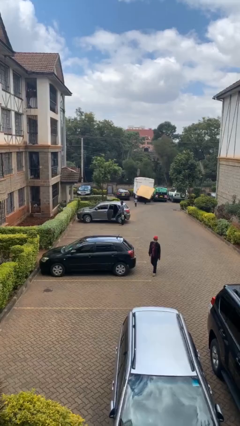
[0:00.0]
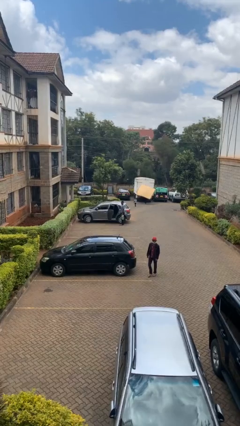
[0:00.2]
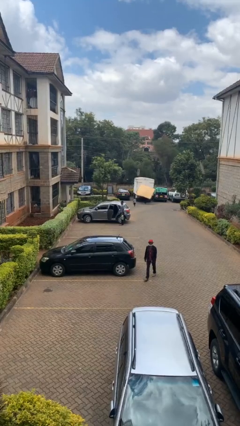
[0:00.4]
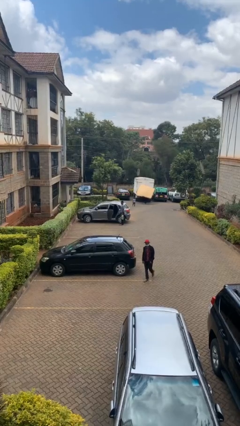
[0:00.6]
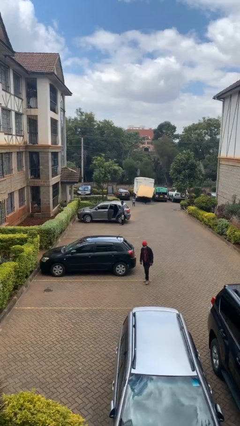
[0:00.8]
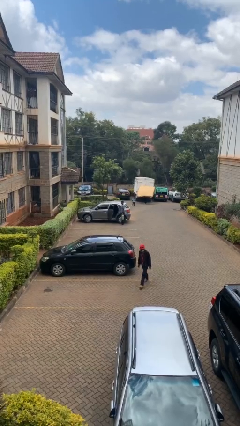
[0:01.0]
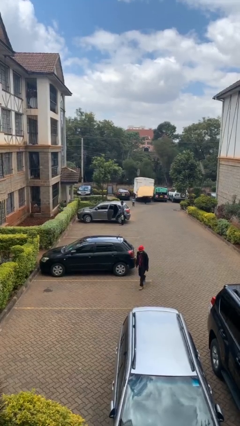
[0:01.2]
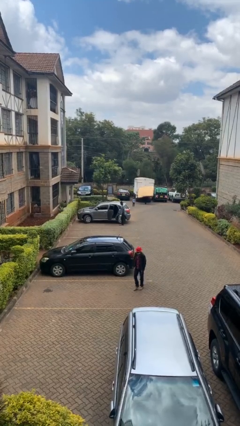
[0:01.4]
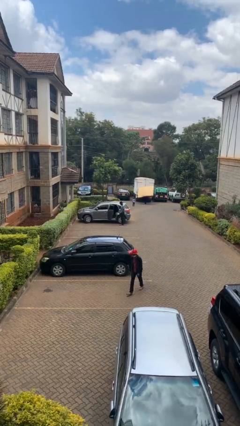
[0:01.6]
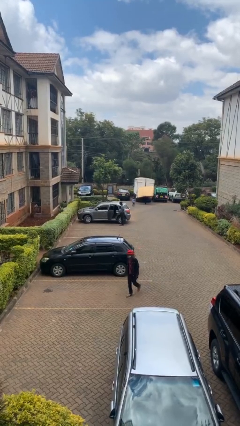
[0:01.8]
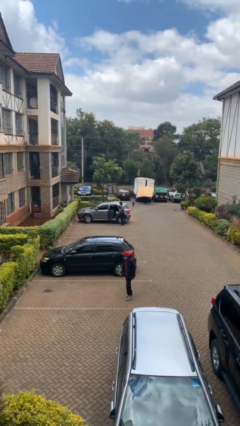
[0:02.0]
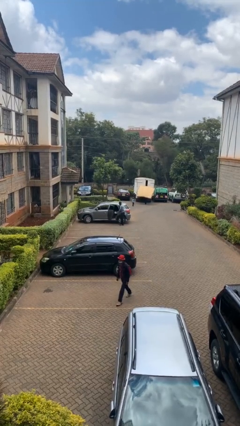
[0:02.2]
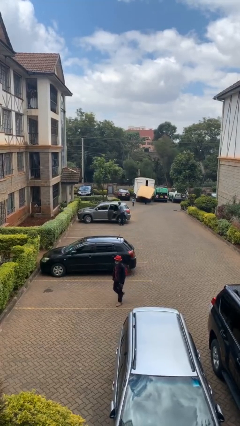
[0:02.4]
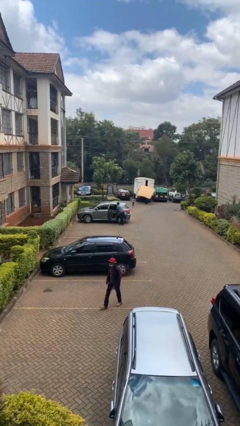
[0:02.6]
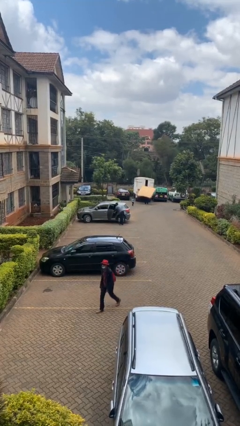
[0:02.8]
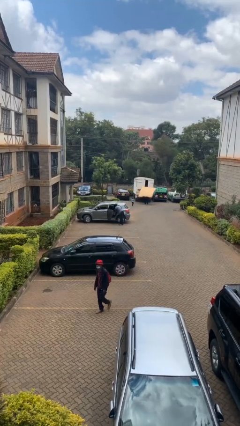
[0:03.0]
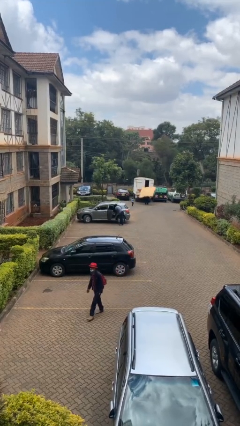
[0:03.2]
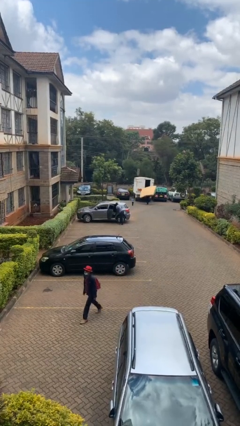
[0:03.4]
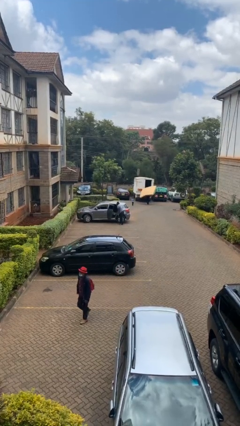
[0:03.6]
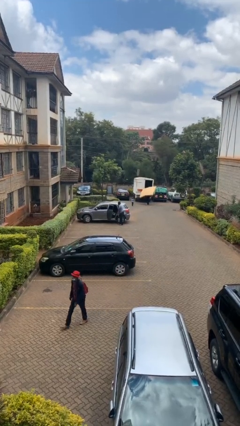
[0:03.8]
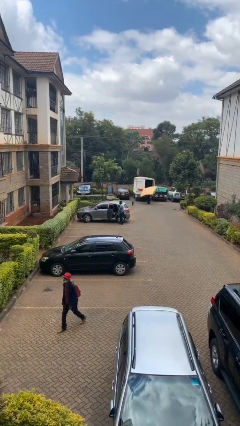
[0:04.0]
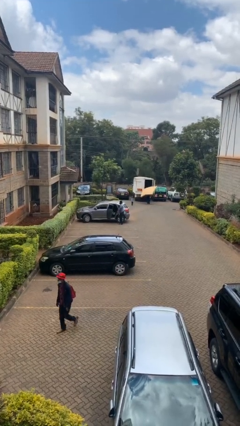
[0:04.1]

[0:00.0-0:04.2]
person loads car

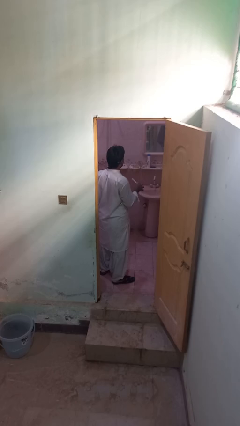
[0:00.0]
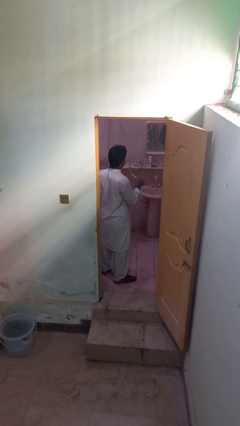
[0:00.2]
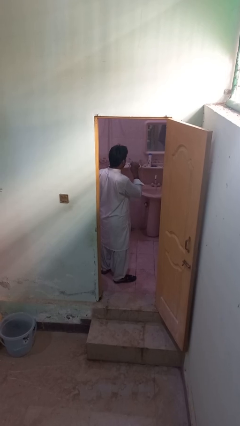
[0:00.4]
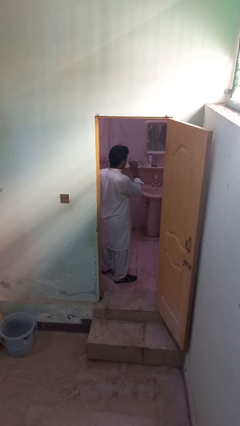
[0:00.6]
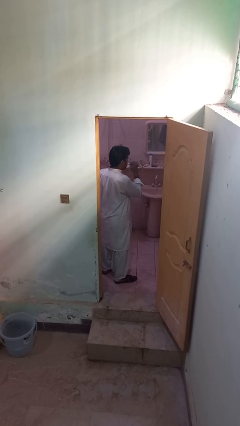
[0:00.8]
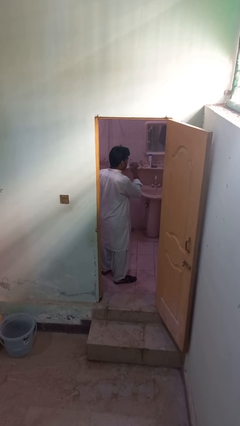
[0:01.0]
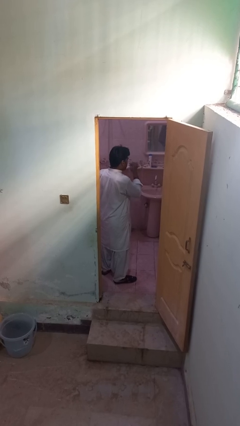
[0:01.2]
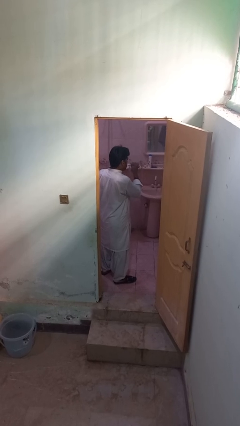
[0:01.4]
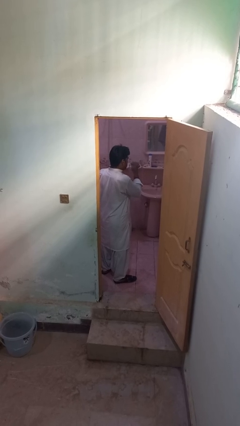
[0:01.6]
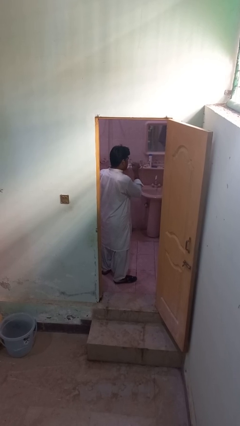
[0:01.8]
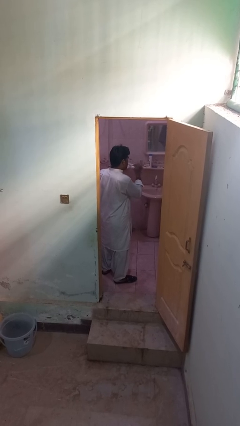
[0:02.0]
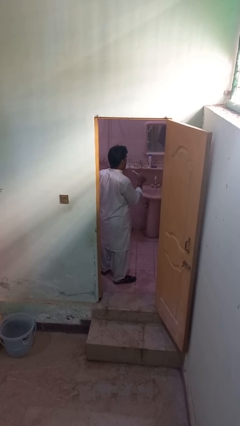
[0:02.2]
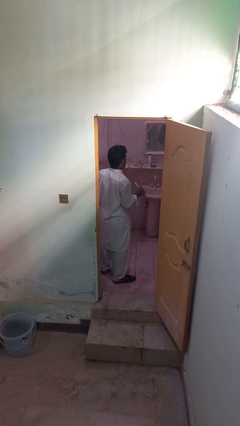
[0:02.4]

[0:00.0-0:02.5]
person brushes teeth

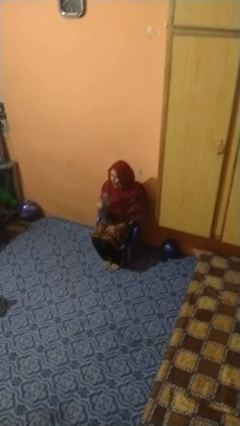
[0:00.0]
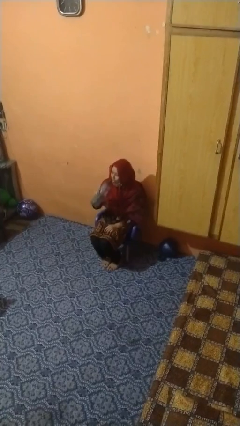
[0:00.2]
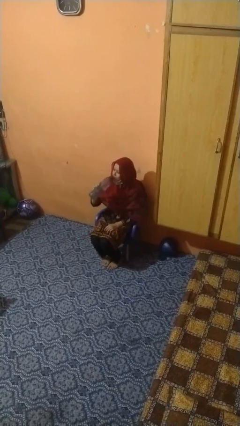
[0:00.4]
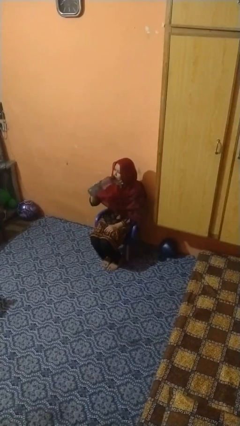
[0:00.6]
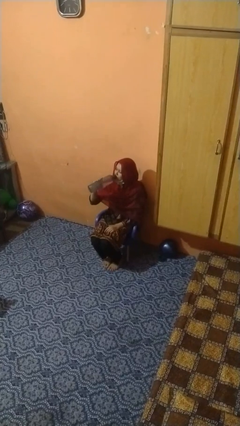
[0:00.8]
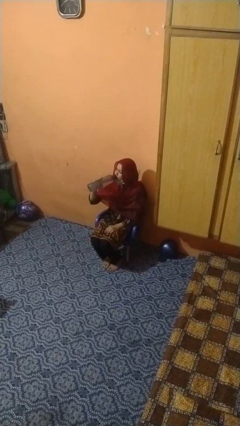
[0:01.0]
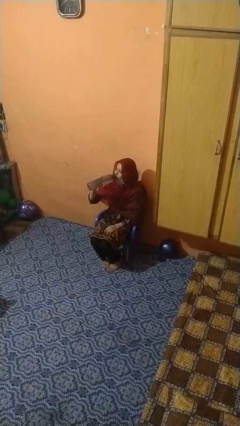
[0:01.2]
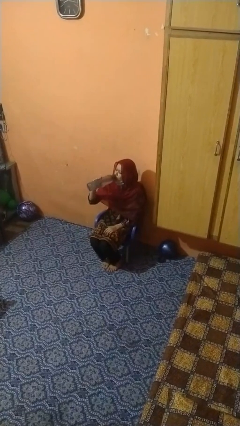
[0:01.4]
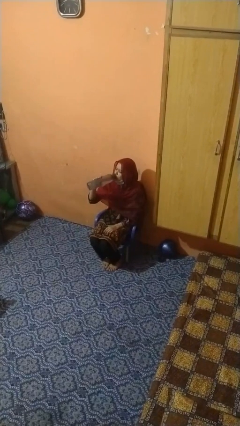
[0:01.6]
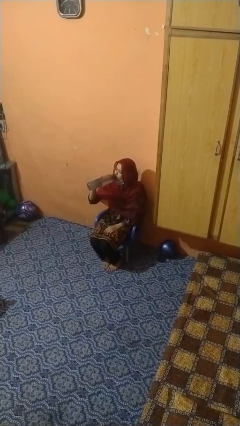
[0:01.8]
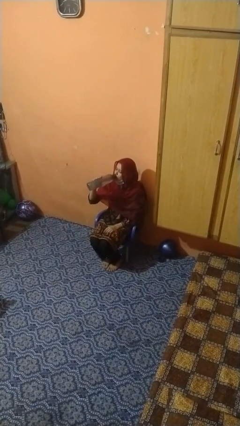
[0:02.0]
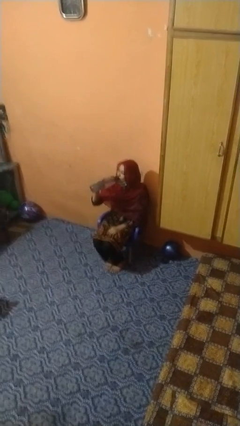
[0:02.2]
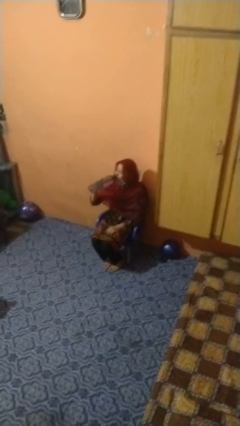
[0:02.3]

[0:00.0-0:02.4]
person drinks from bottle

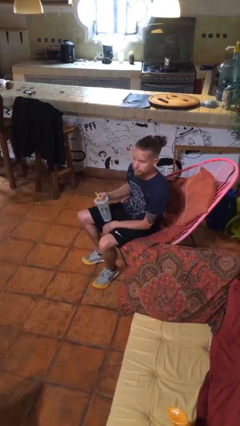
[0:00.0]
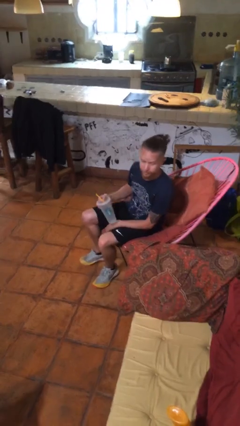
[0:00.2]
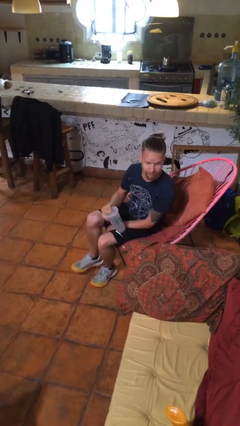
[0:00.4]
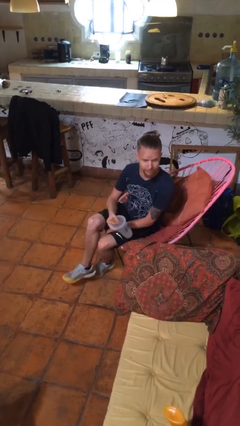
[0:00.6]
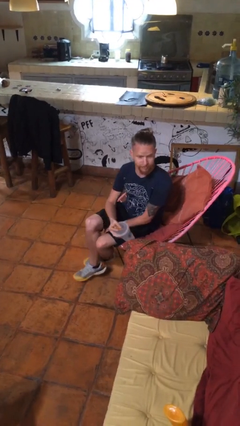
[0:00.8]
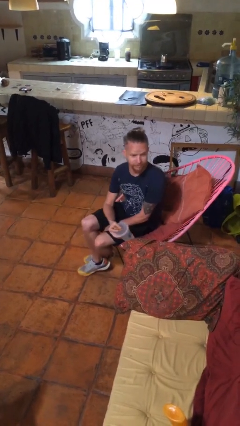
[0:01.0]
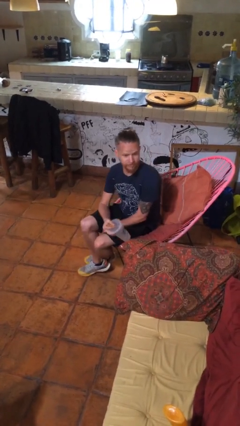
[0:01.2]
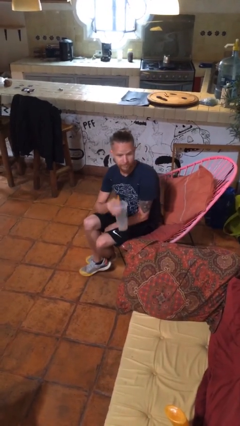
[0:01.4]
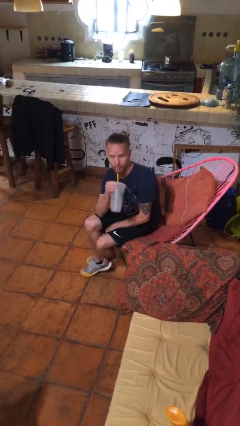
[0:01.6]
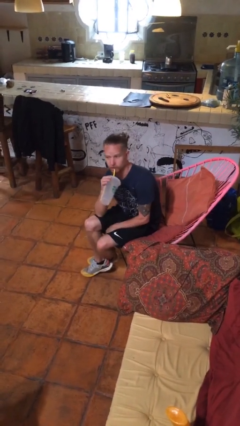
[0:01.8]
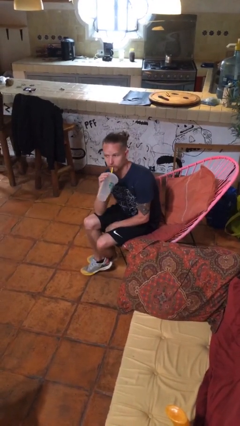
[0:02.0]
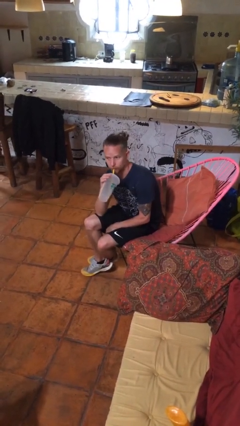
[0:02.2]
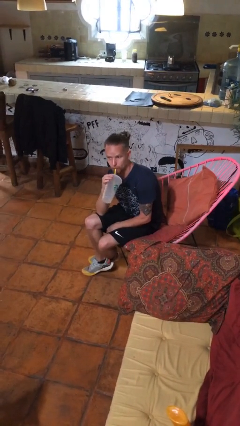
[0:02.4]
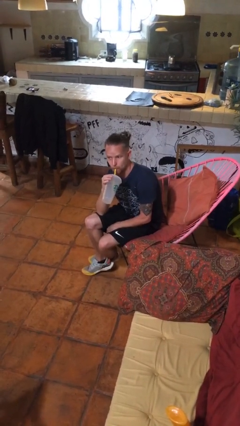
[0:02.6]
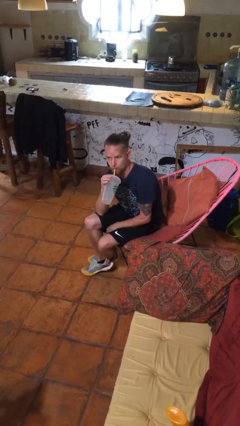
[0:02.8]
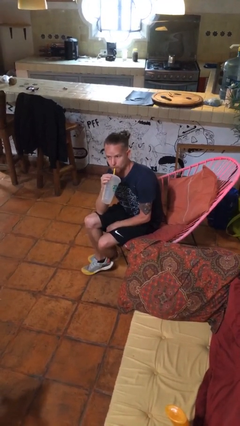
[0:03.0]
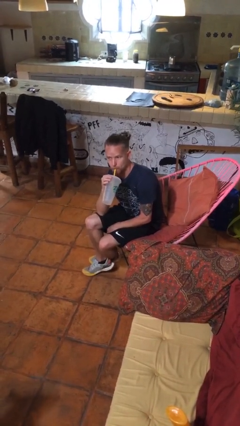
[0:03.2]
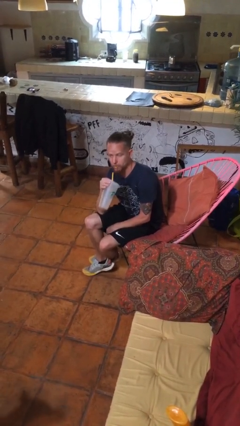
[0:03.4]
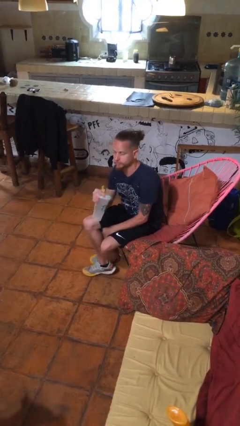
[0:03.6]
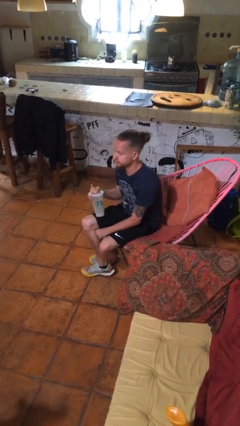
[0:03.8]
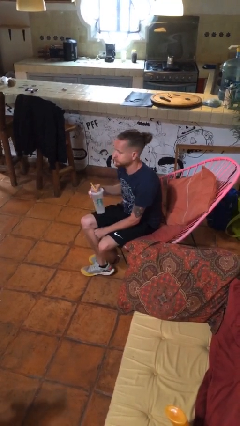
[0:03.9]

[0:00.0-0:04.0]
person drinks from straw

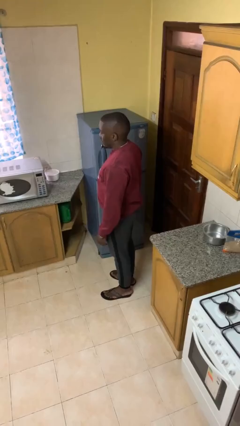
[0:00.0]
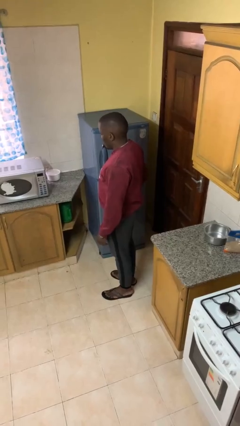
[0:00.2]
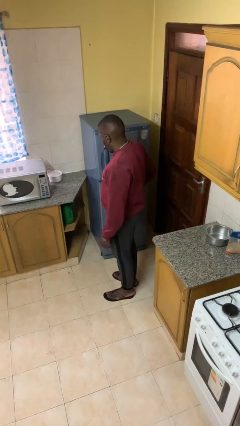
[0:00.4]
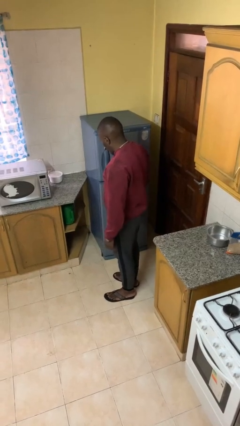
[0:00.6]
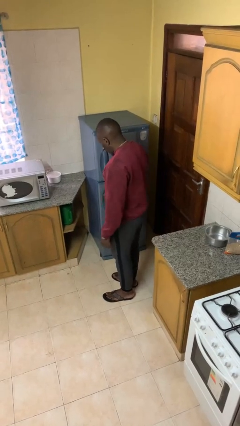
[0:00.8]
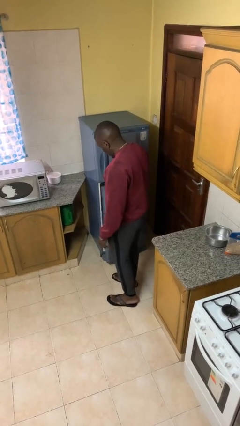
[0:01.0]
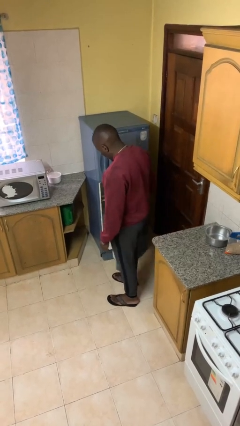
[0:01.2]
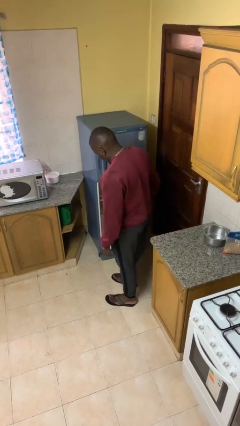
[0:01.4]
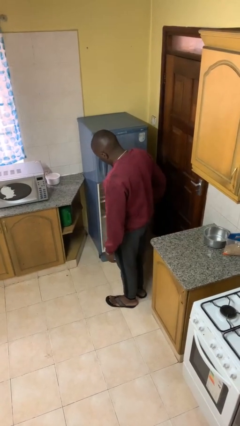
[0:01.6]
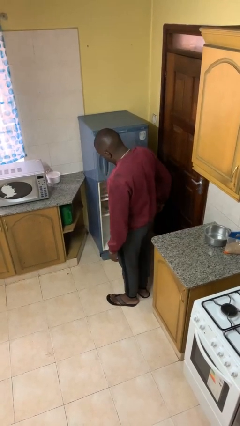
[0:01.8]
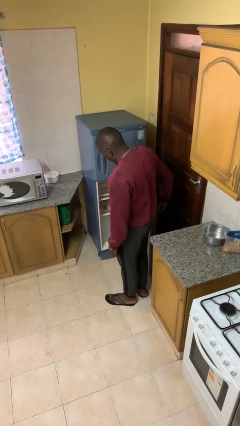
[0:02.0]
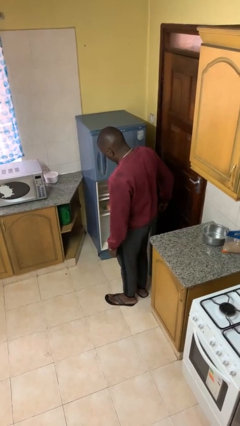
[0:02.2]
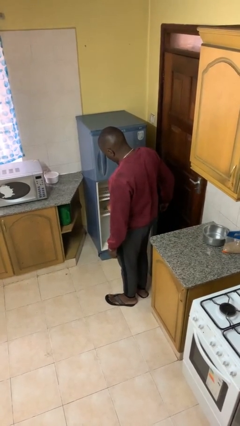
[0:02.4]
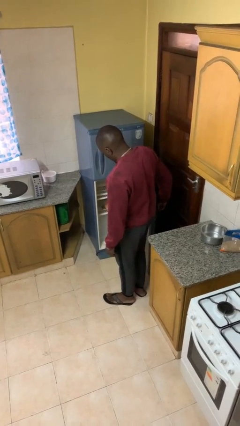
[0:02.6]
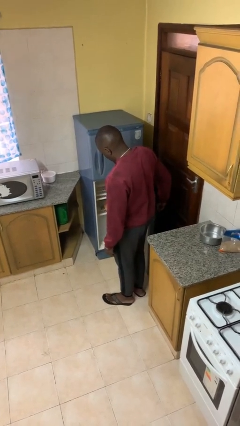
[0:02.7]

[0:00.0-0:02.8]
person opens refrigerator

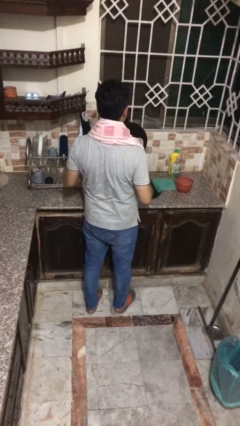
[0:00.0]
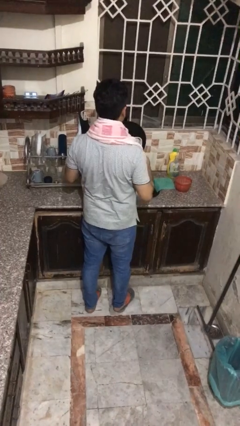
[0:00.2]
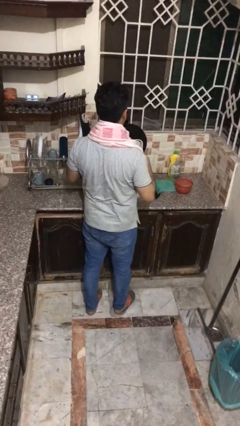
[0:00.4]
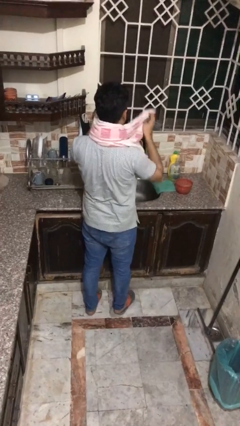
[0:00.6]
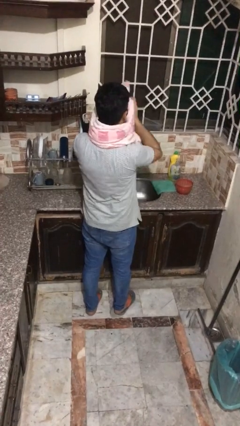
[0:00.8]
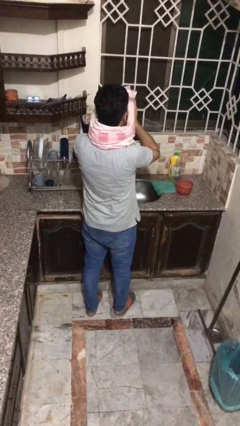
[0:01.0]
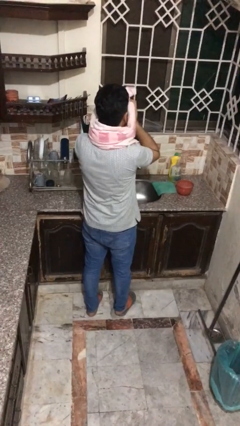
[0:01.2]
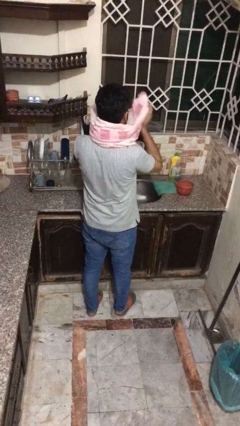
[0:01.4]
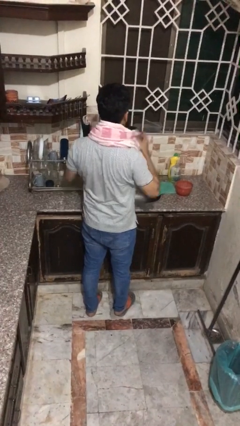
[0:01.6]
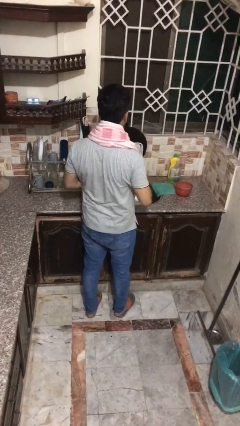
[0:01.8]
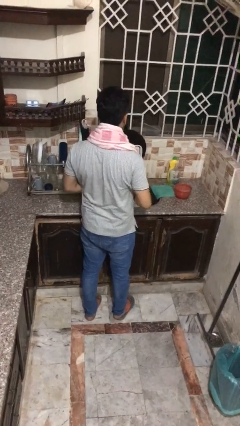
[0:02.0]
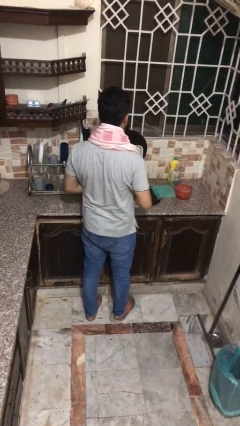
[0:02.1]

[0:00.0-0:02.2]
person dries face with towel
